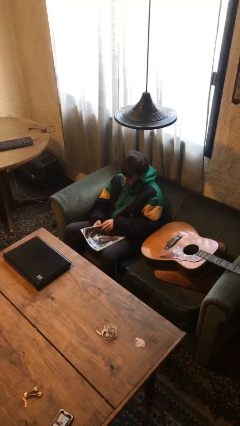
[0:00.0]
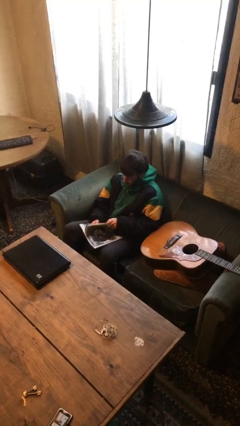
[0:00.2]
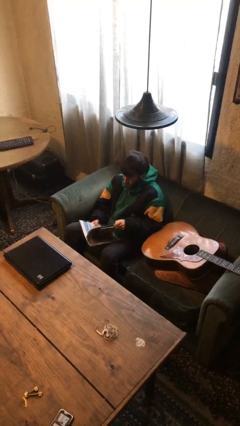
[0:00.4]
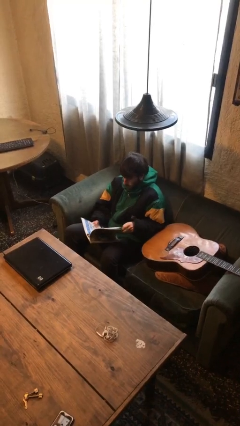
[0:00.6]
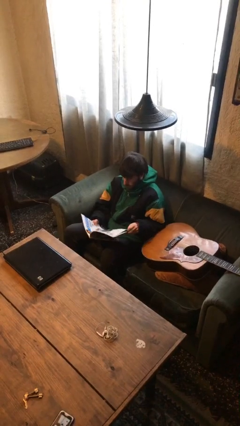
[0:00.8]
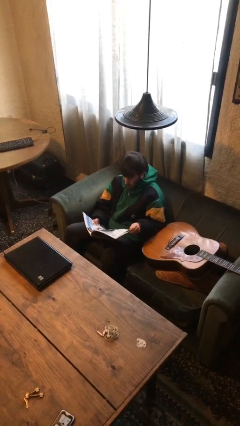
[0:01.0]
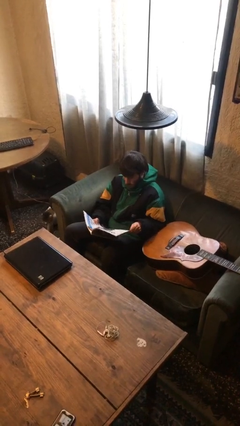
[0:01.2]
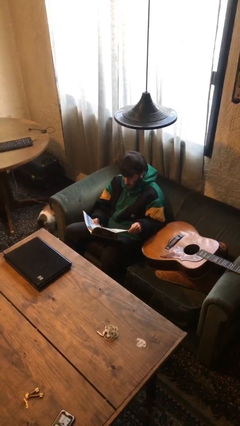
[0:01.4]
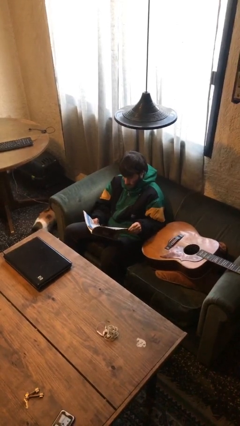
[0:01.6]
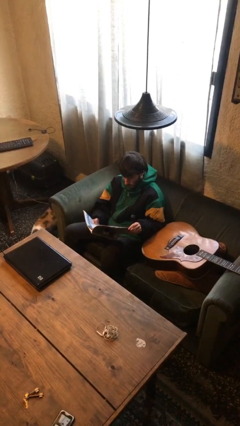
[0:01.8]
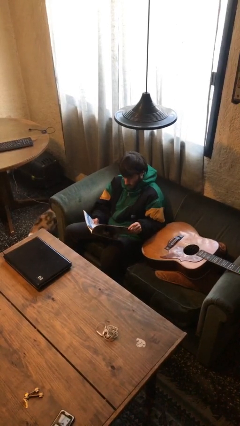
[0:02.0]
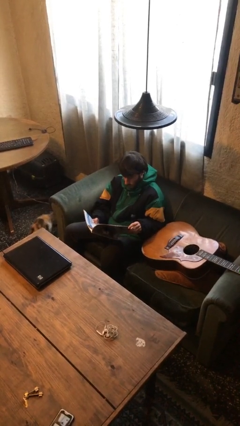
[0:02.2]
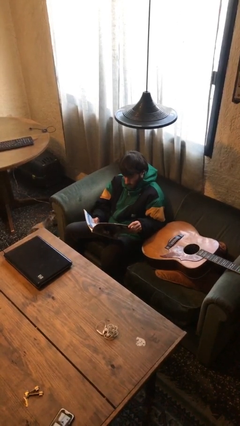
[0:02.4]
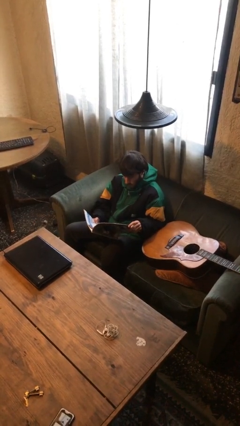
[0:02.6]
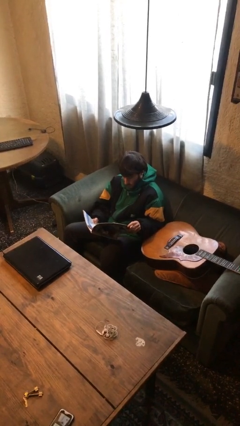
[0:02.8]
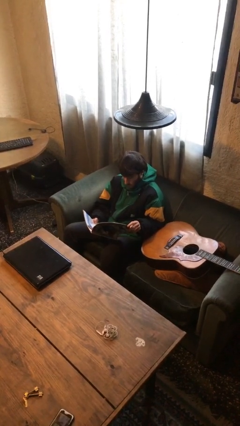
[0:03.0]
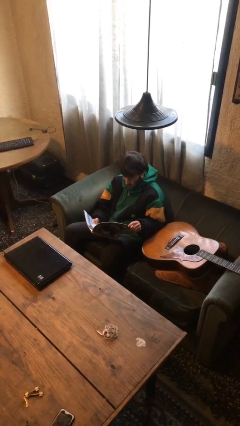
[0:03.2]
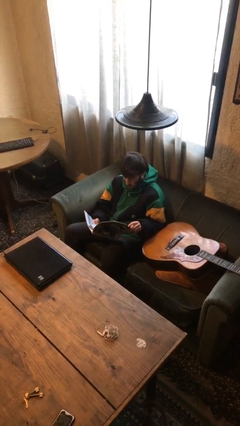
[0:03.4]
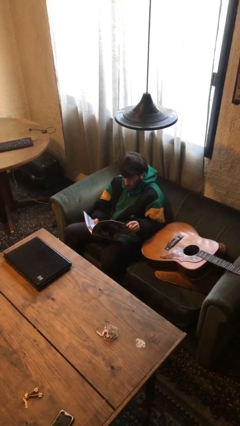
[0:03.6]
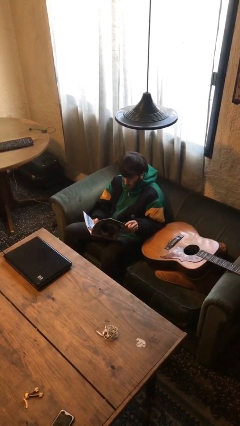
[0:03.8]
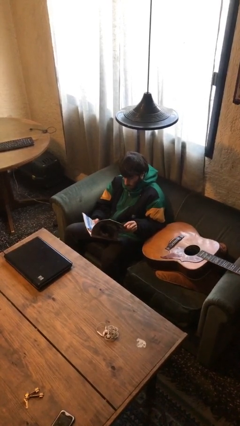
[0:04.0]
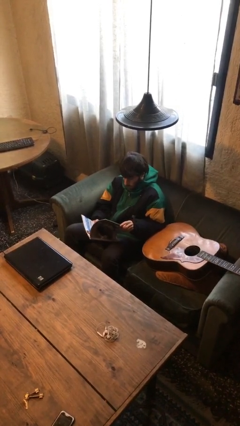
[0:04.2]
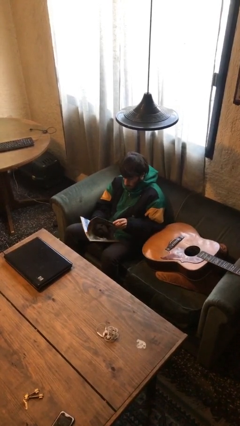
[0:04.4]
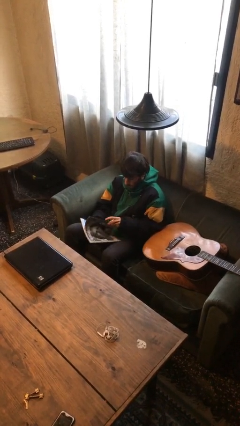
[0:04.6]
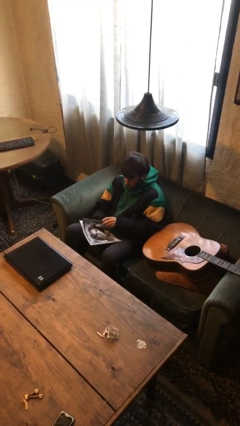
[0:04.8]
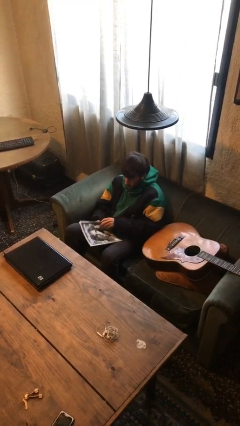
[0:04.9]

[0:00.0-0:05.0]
person reads magazine

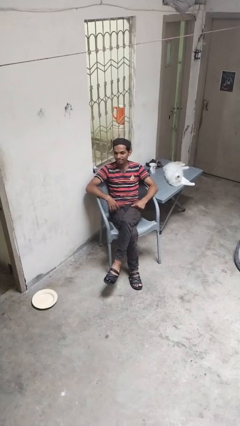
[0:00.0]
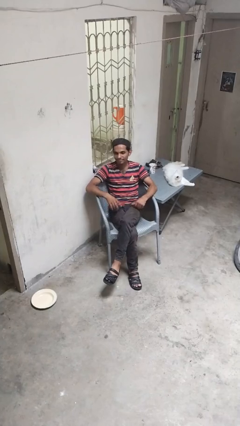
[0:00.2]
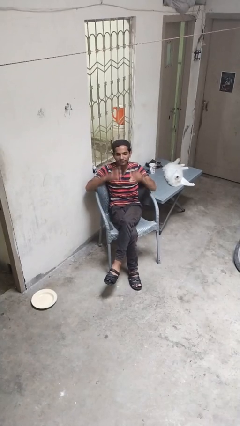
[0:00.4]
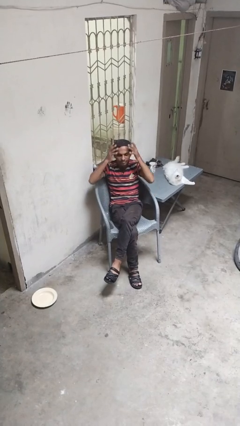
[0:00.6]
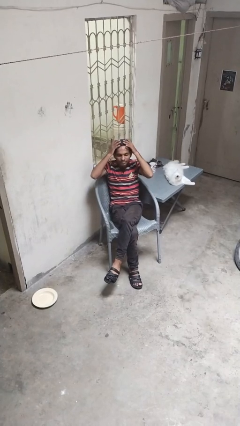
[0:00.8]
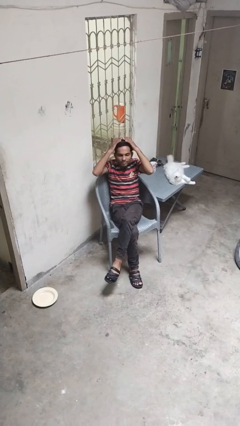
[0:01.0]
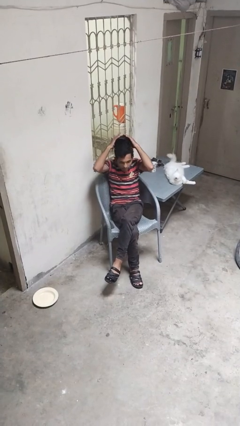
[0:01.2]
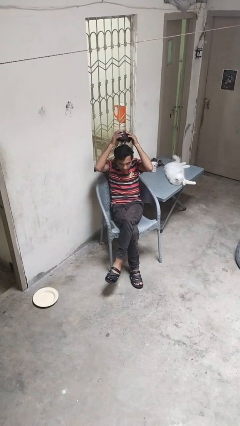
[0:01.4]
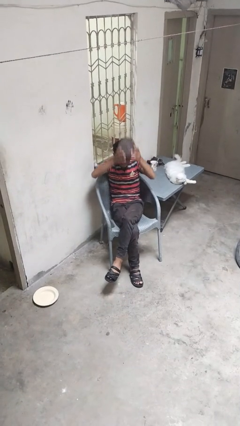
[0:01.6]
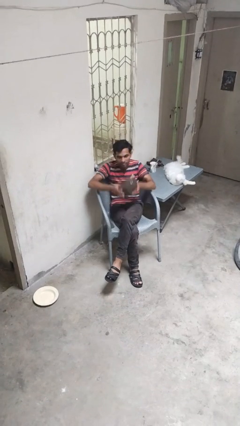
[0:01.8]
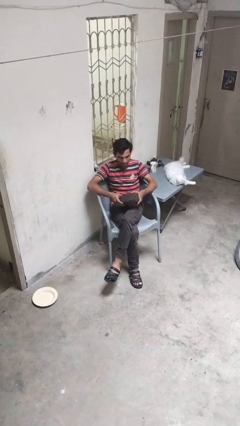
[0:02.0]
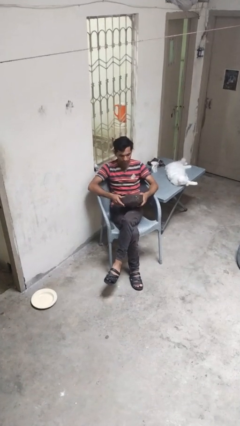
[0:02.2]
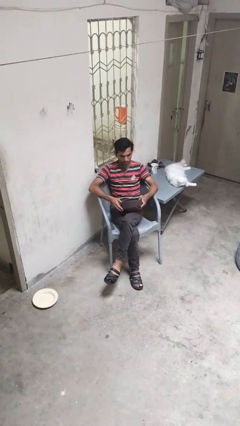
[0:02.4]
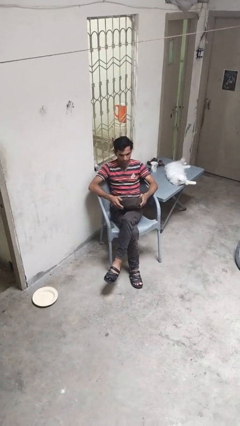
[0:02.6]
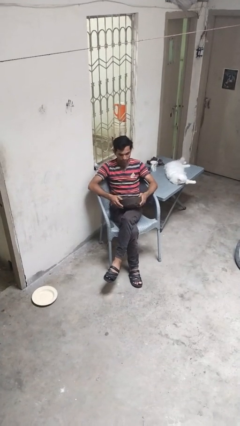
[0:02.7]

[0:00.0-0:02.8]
person takes off hat

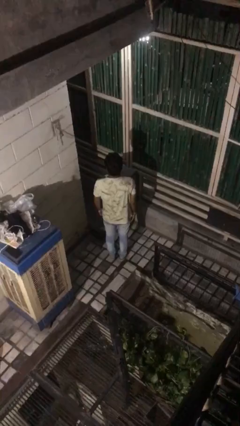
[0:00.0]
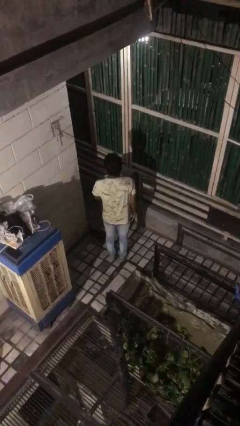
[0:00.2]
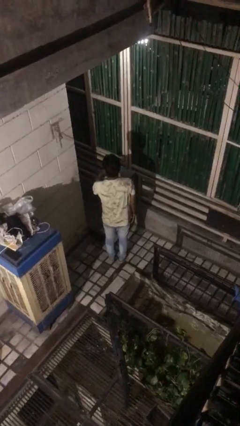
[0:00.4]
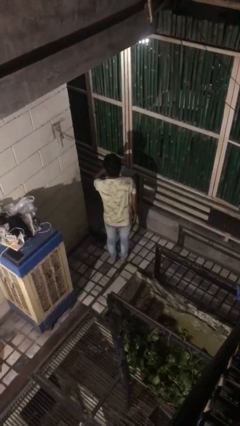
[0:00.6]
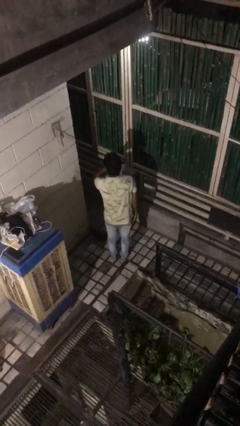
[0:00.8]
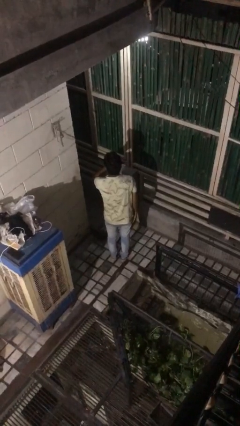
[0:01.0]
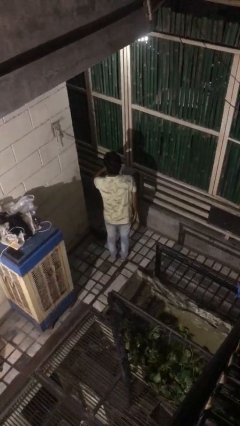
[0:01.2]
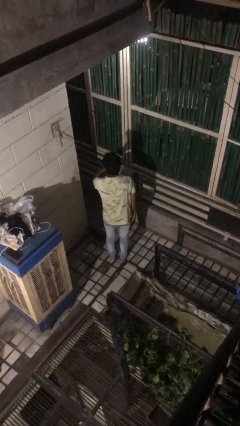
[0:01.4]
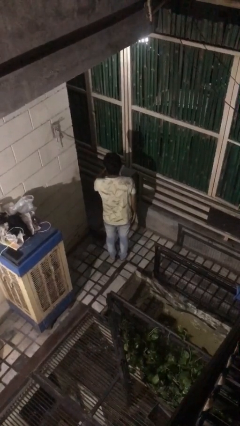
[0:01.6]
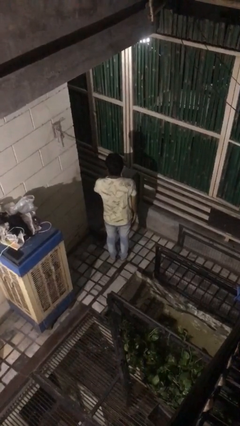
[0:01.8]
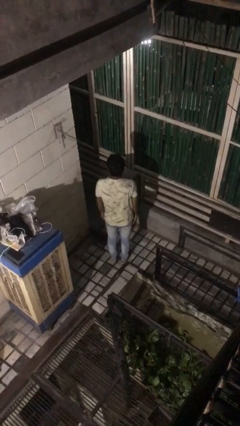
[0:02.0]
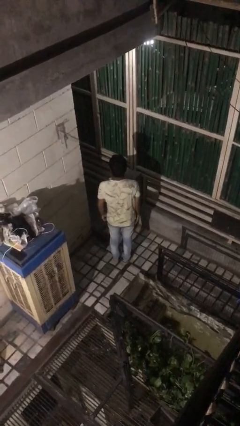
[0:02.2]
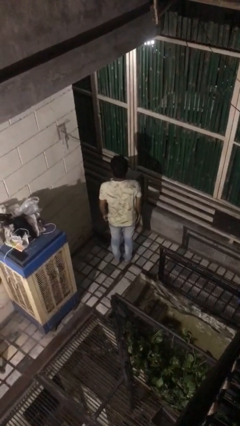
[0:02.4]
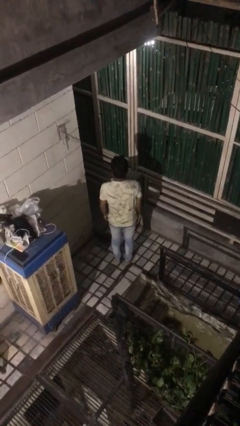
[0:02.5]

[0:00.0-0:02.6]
person gestures be quiet

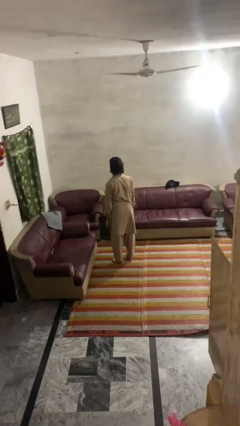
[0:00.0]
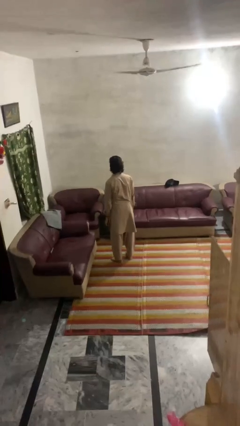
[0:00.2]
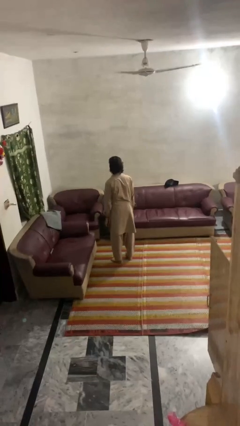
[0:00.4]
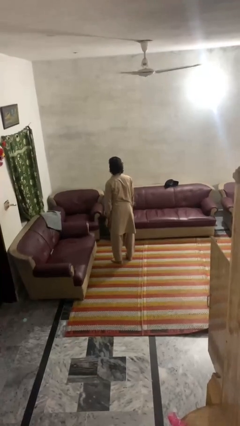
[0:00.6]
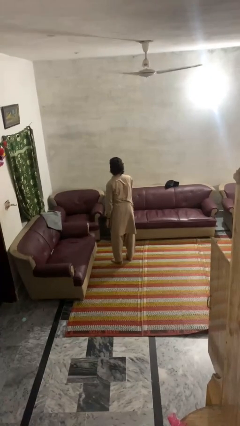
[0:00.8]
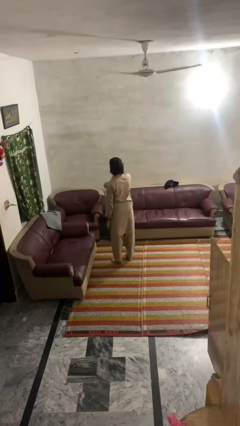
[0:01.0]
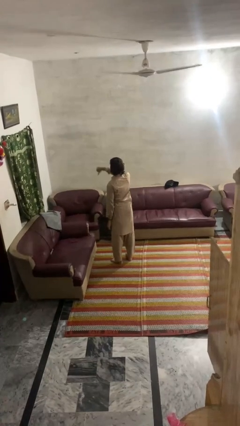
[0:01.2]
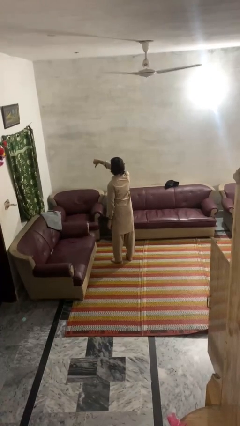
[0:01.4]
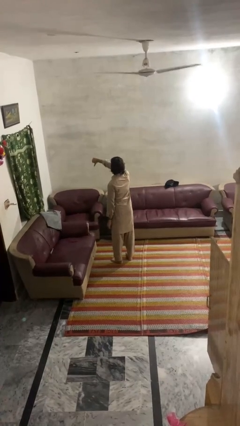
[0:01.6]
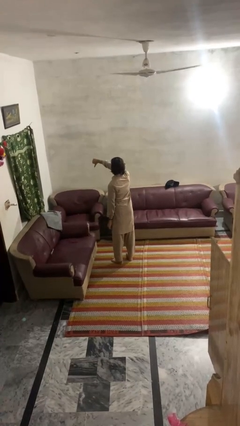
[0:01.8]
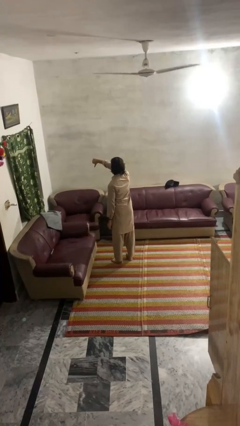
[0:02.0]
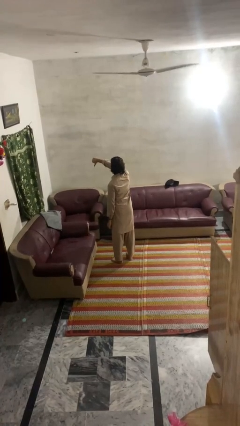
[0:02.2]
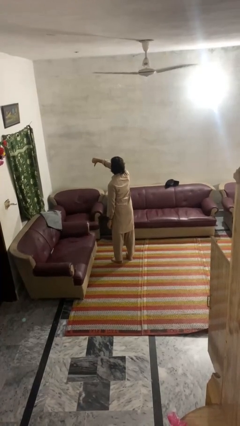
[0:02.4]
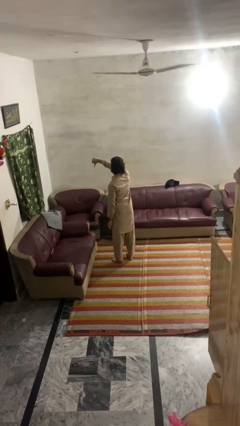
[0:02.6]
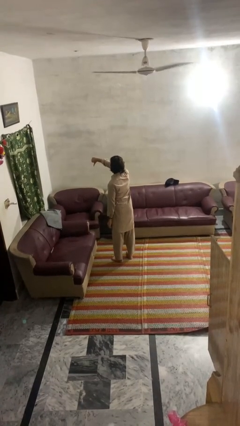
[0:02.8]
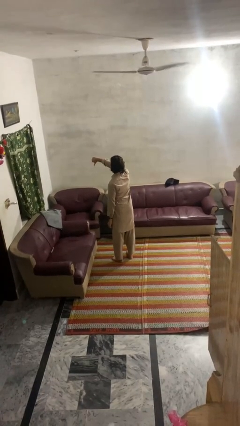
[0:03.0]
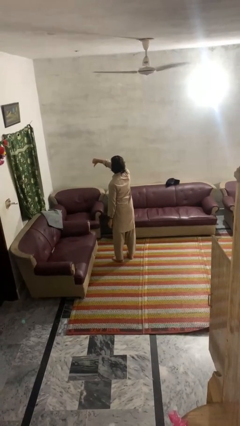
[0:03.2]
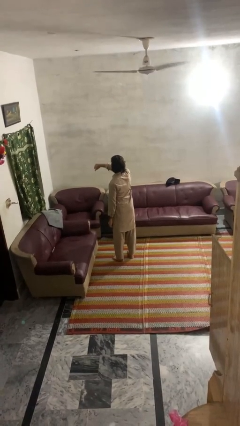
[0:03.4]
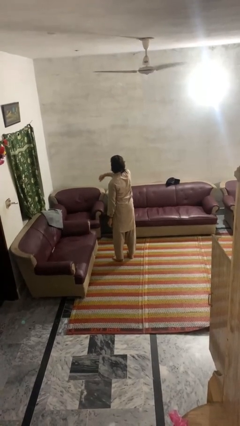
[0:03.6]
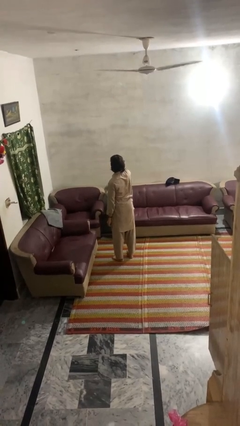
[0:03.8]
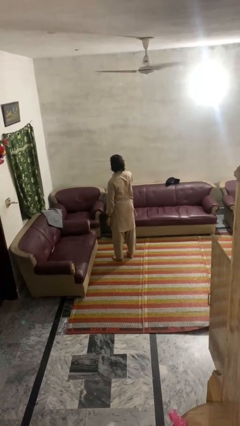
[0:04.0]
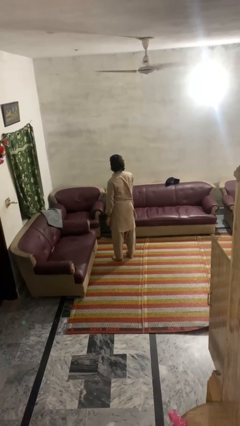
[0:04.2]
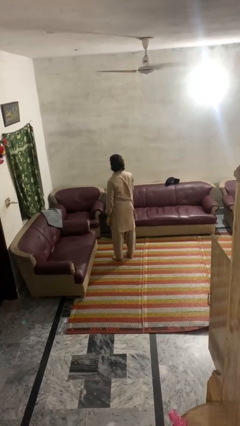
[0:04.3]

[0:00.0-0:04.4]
person gestures thumbs down

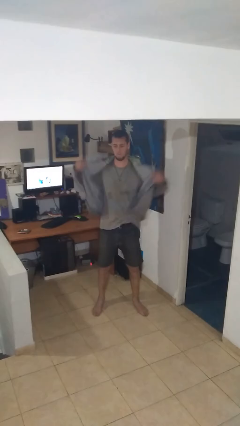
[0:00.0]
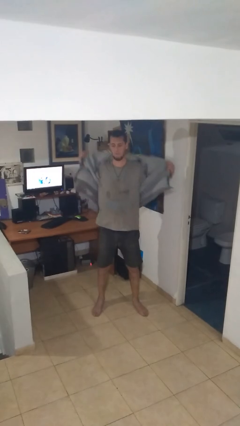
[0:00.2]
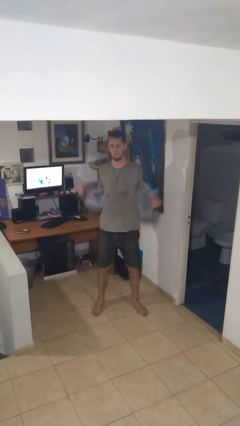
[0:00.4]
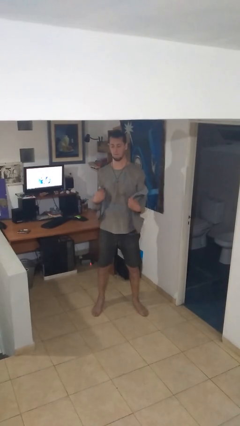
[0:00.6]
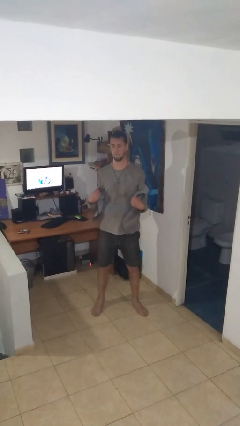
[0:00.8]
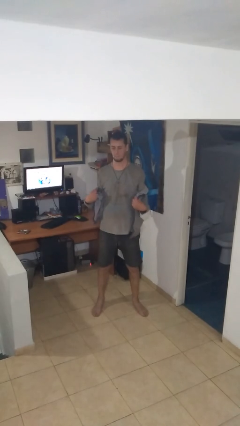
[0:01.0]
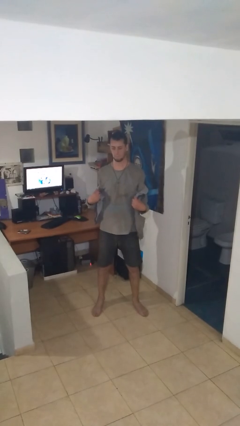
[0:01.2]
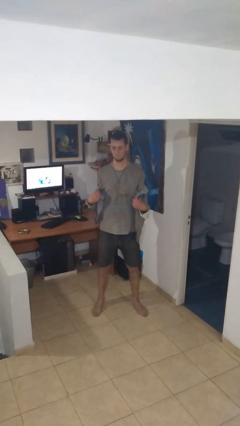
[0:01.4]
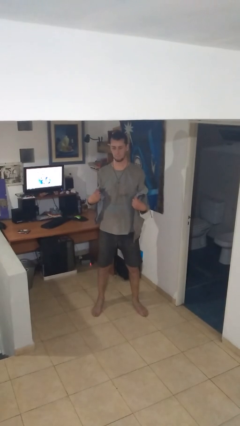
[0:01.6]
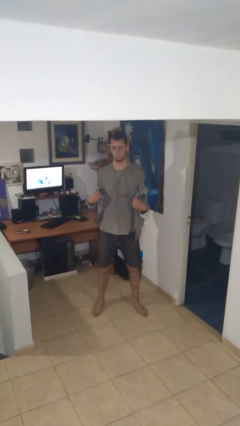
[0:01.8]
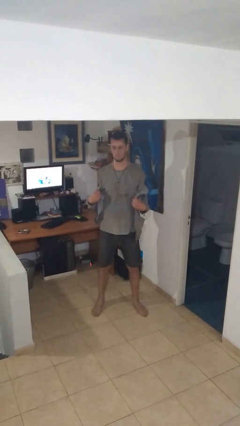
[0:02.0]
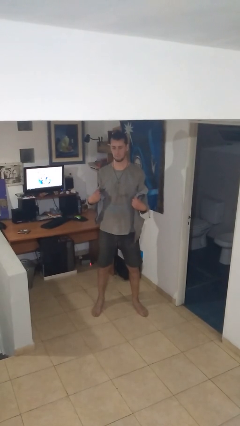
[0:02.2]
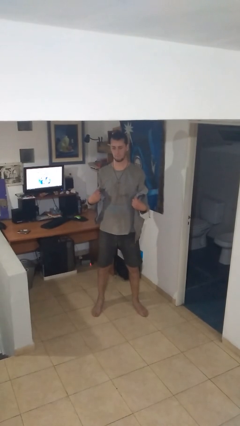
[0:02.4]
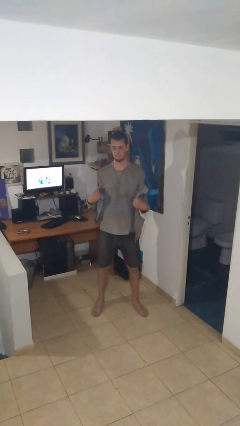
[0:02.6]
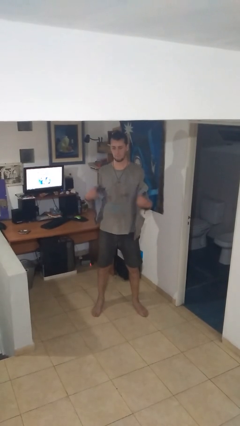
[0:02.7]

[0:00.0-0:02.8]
person takes off jacket
